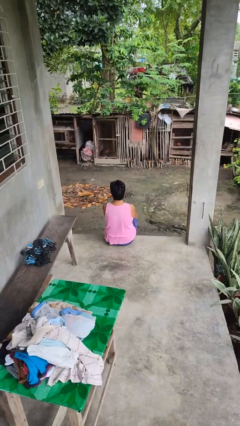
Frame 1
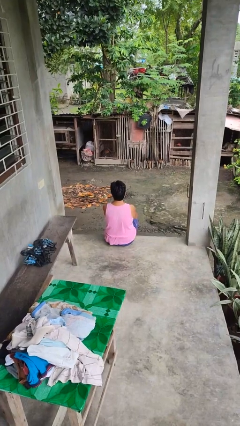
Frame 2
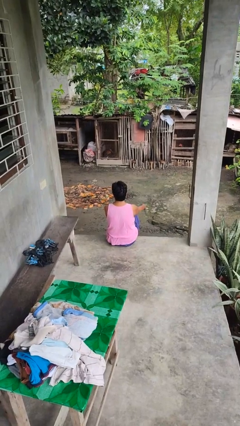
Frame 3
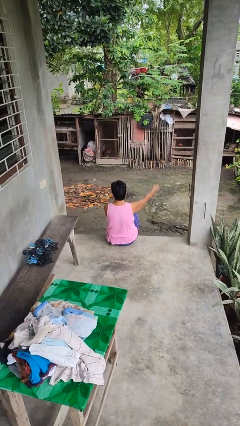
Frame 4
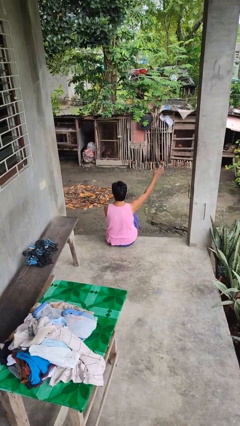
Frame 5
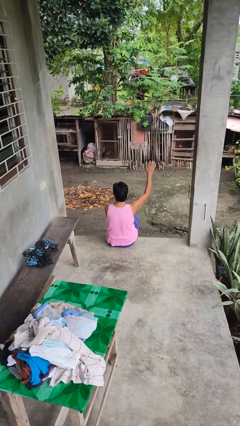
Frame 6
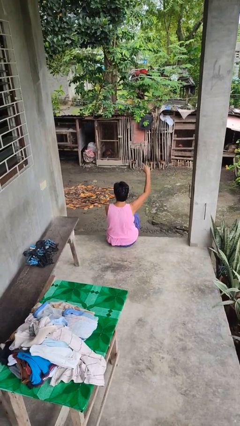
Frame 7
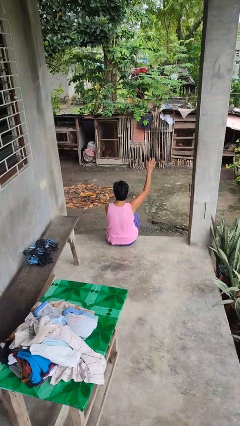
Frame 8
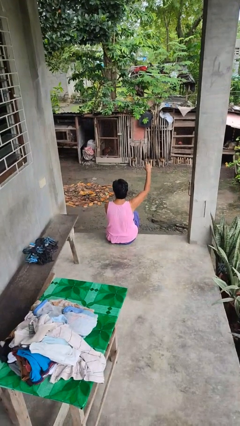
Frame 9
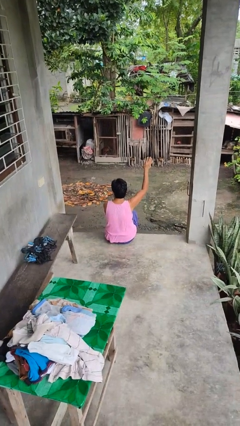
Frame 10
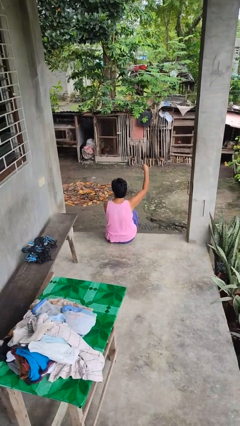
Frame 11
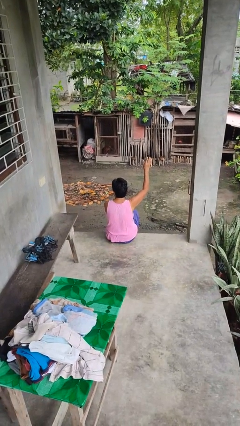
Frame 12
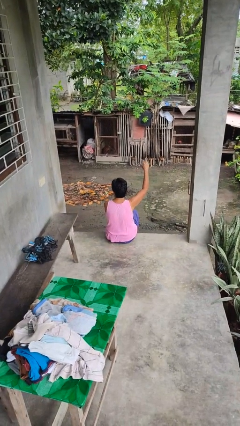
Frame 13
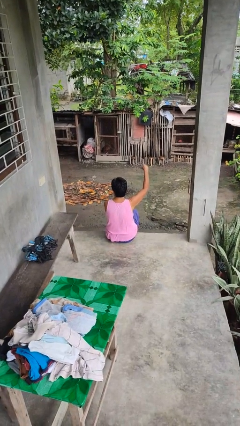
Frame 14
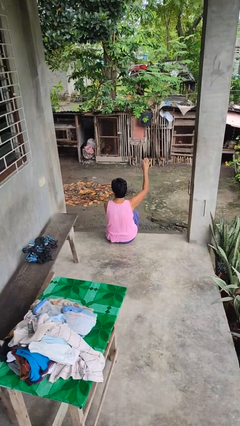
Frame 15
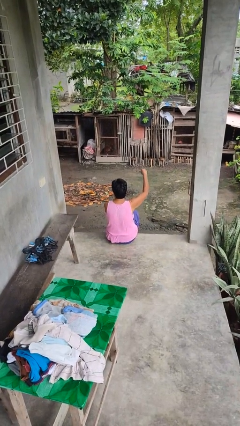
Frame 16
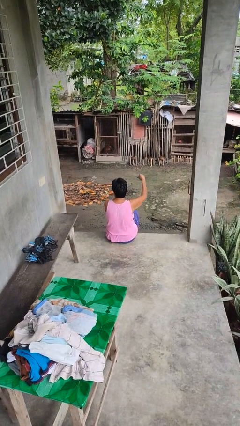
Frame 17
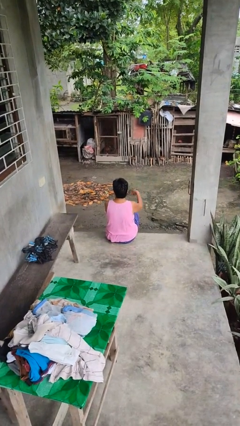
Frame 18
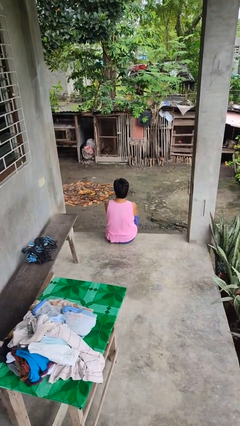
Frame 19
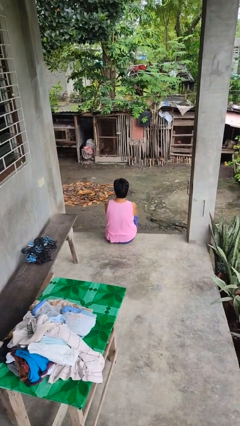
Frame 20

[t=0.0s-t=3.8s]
person gestures come here

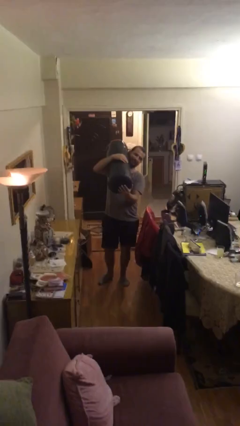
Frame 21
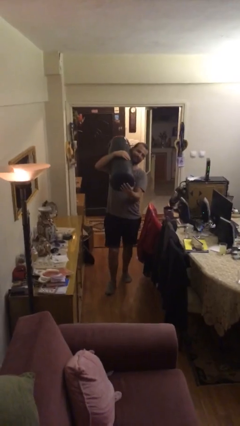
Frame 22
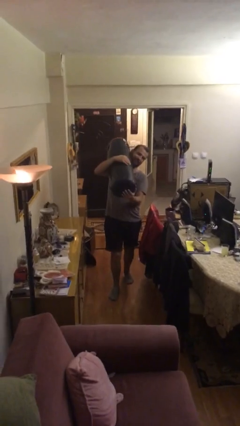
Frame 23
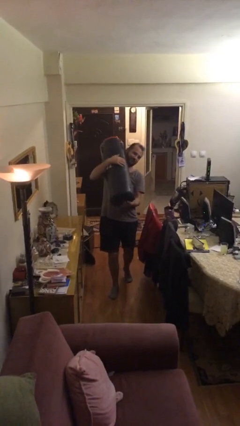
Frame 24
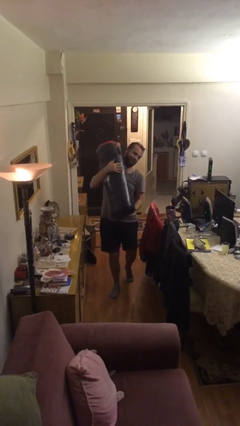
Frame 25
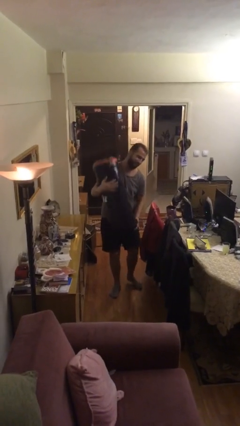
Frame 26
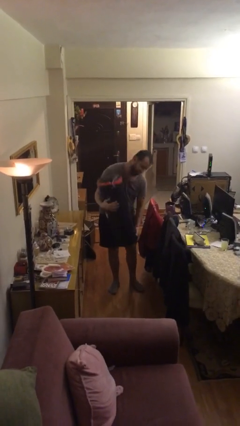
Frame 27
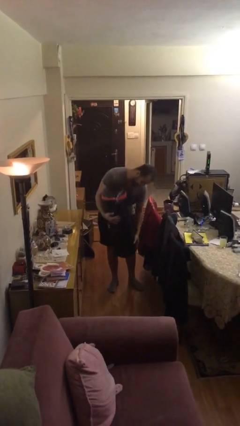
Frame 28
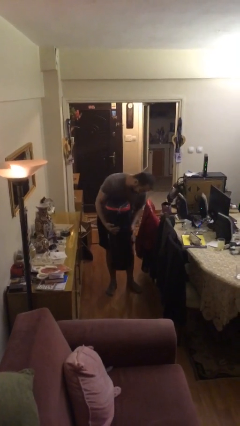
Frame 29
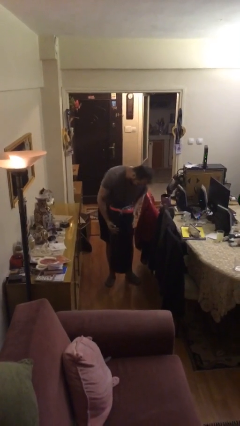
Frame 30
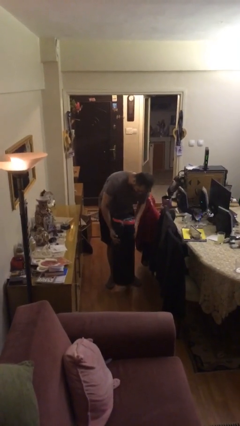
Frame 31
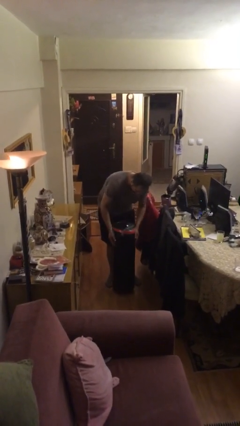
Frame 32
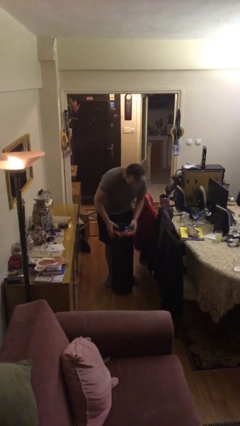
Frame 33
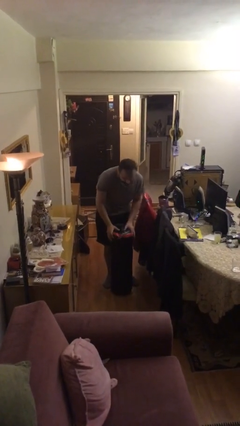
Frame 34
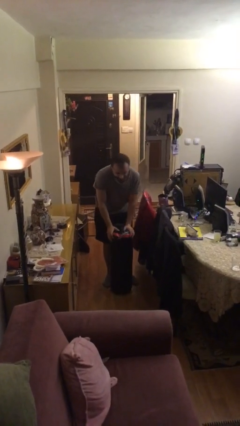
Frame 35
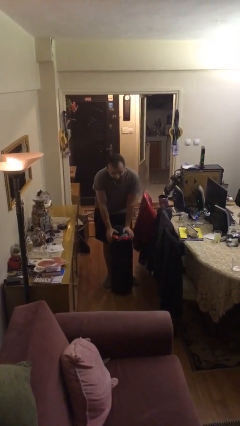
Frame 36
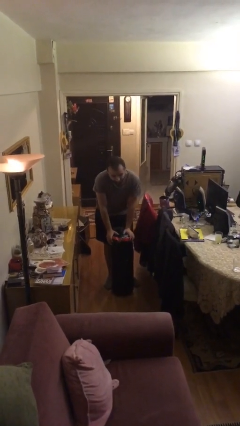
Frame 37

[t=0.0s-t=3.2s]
person puts down object on floor

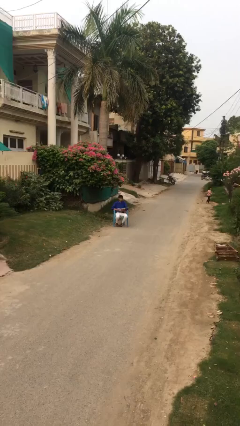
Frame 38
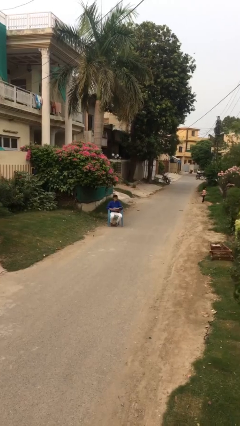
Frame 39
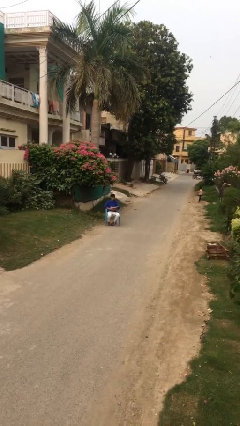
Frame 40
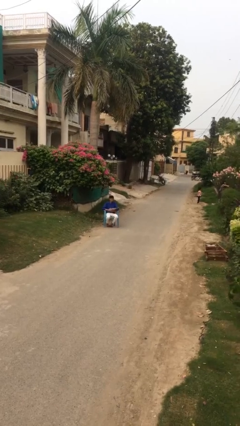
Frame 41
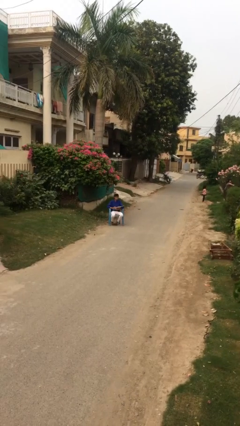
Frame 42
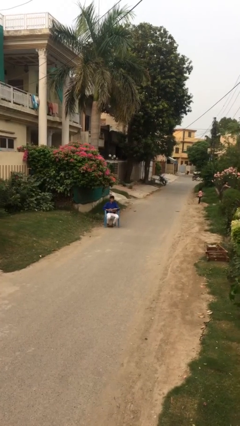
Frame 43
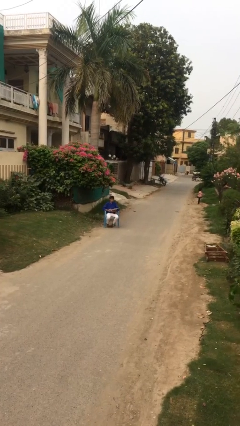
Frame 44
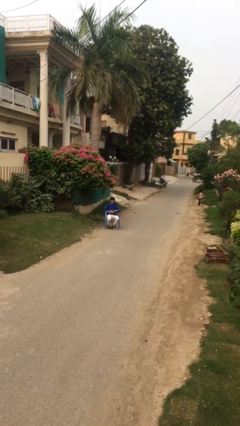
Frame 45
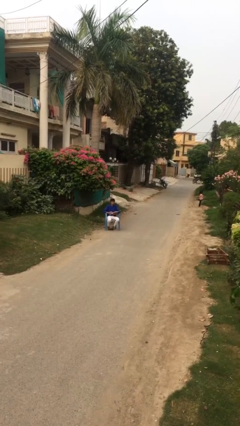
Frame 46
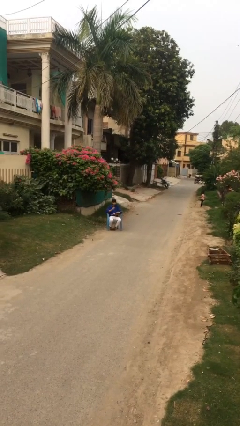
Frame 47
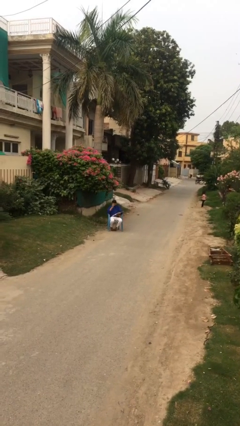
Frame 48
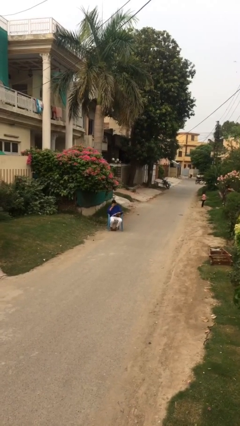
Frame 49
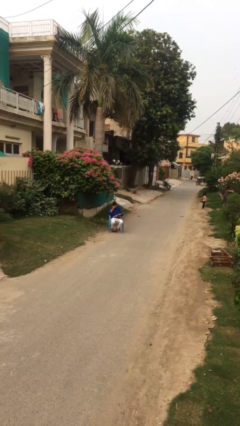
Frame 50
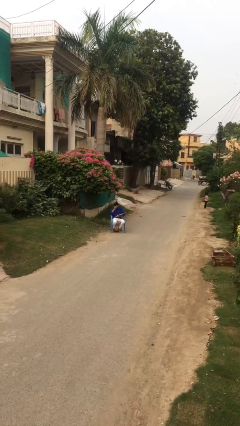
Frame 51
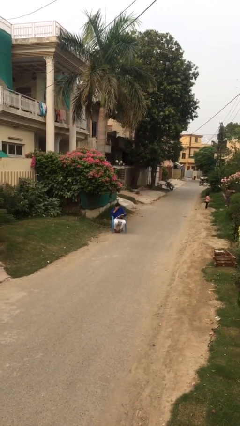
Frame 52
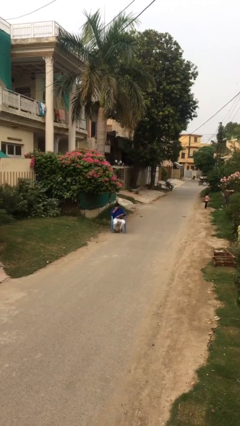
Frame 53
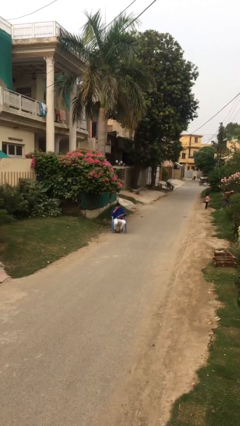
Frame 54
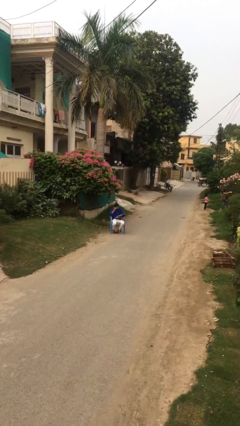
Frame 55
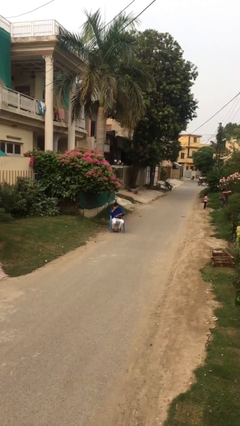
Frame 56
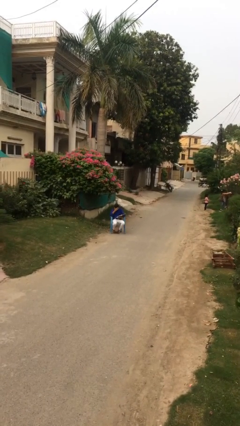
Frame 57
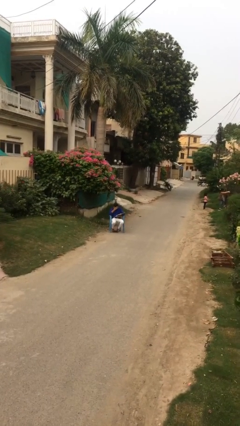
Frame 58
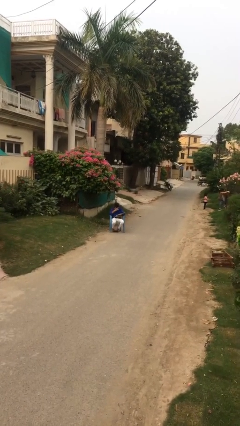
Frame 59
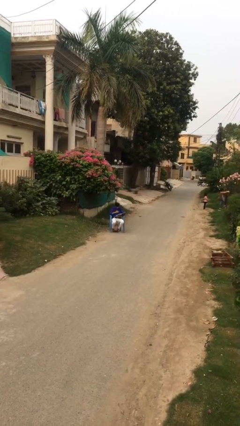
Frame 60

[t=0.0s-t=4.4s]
person reads document

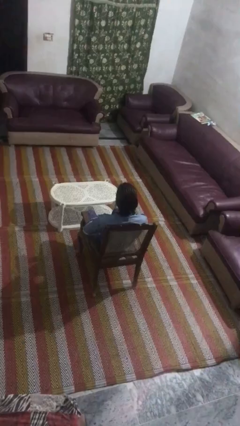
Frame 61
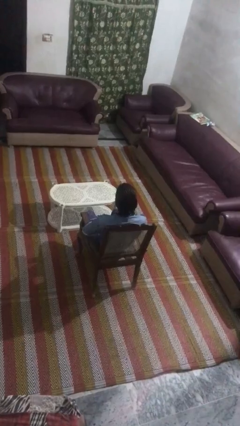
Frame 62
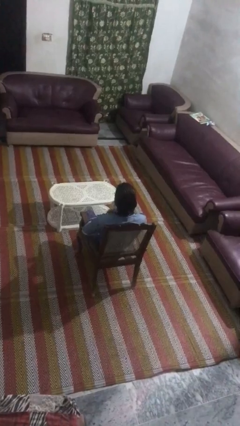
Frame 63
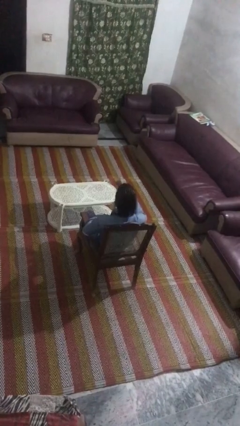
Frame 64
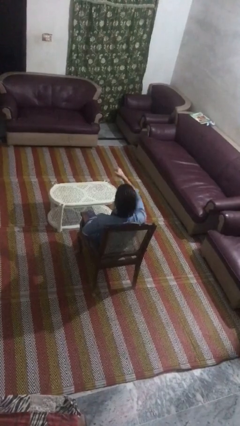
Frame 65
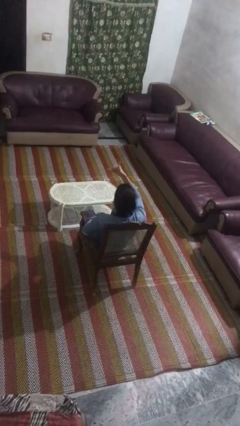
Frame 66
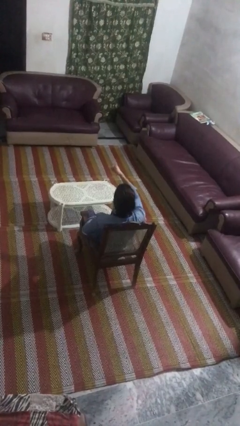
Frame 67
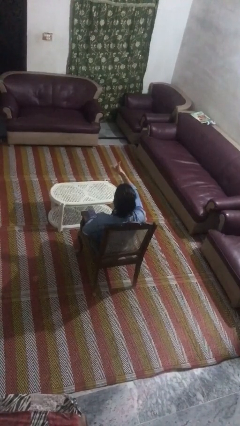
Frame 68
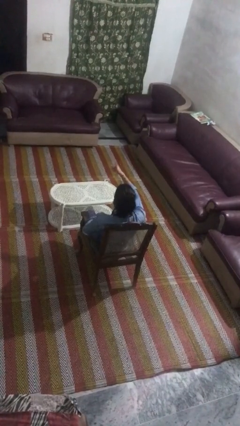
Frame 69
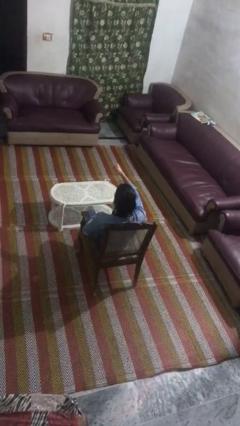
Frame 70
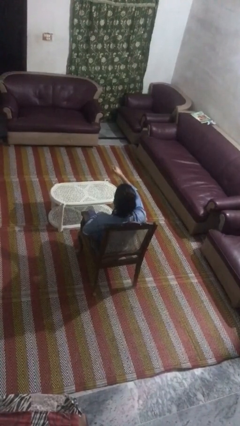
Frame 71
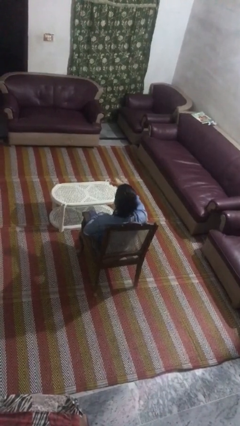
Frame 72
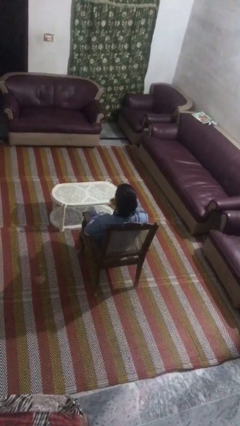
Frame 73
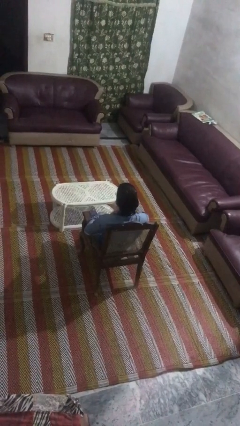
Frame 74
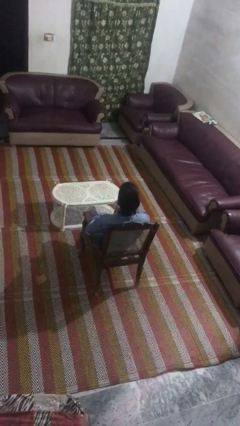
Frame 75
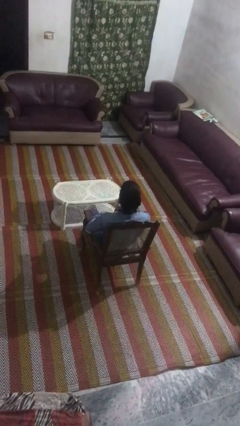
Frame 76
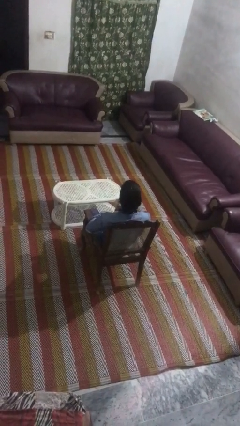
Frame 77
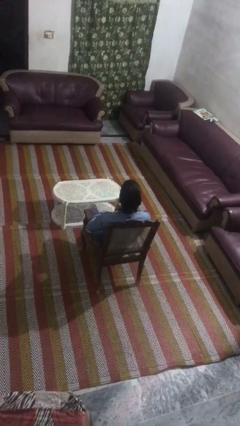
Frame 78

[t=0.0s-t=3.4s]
person gestures hang loose

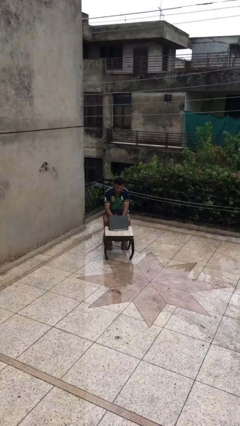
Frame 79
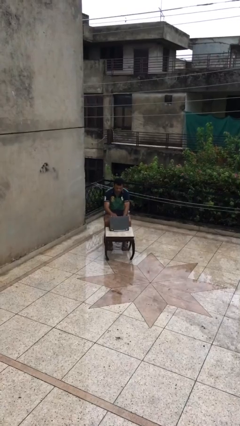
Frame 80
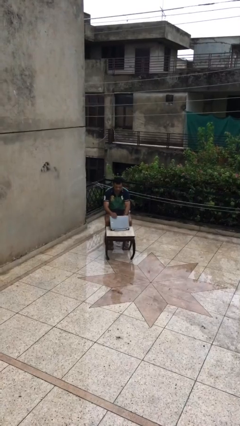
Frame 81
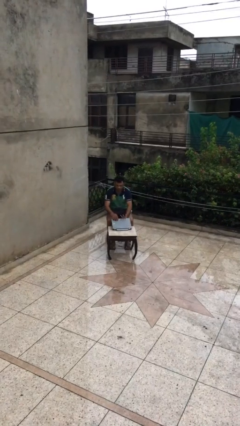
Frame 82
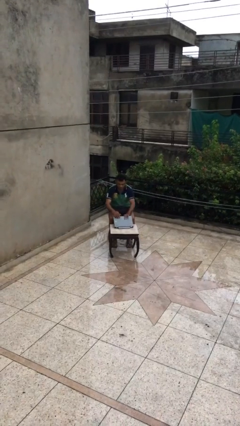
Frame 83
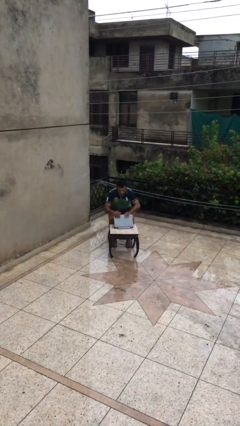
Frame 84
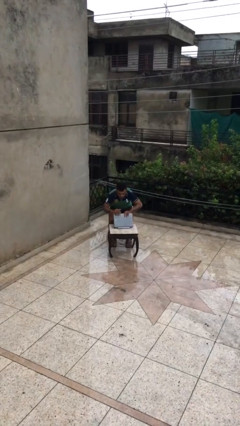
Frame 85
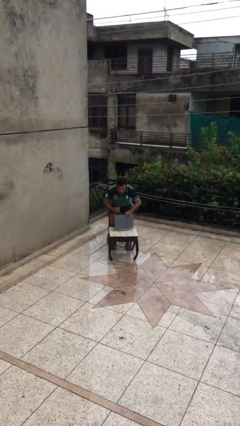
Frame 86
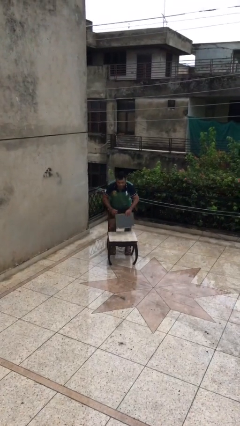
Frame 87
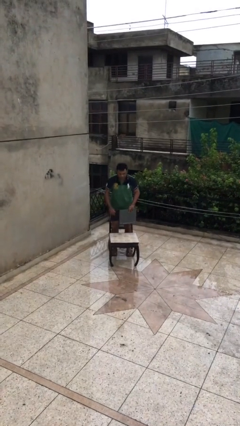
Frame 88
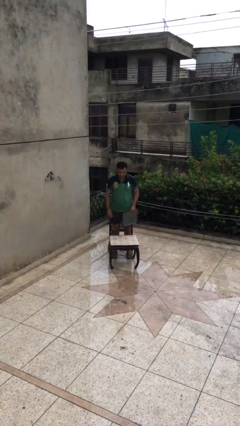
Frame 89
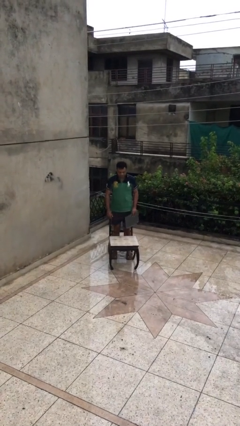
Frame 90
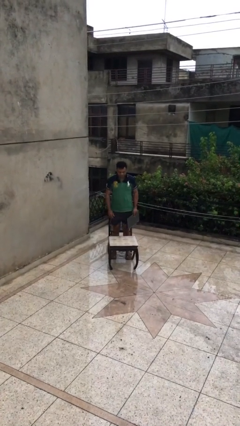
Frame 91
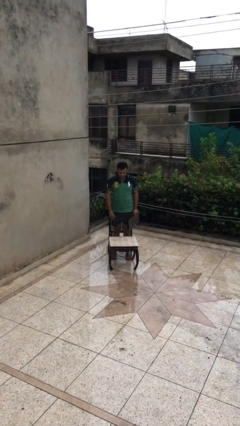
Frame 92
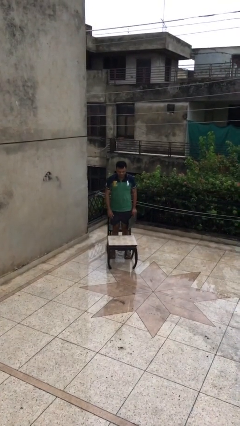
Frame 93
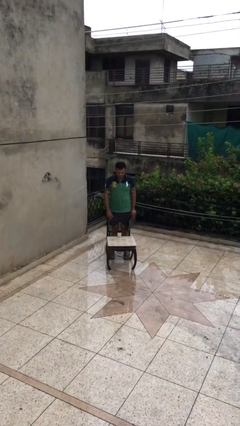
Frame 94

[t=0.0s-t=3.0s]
person stands up
